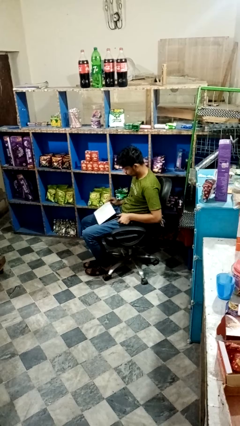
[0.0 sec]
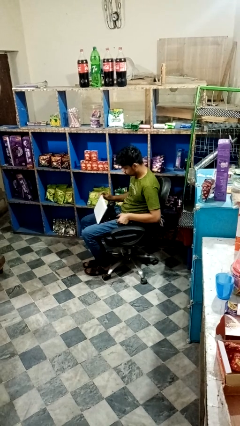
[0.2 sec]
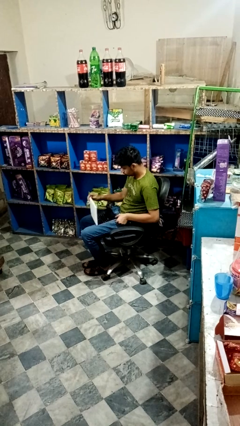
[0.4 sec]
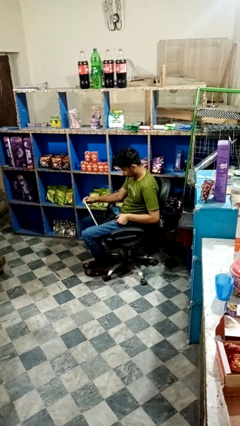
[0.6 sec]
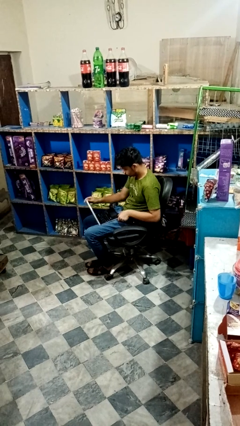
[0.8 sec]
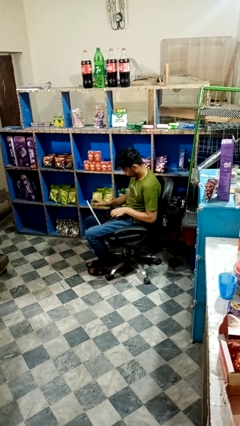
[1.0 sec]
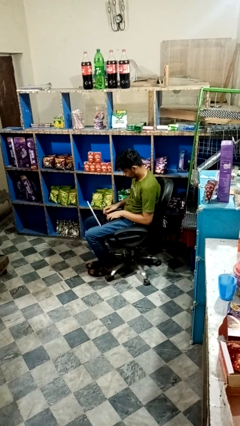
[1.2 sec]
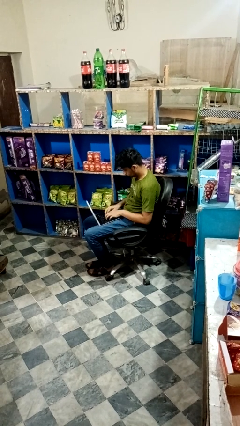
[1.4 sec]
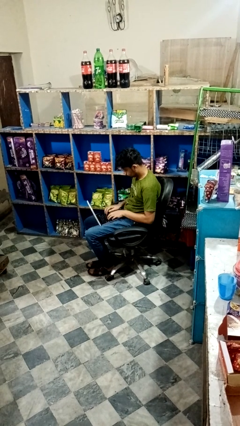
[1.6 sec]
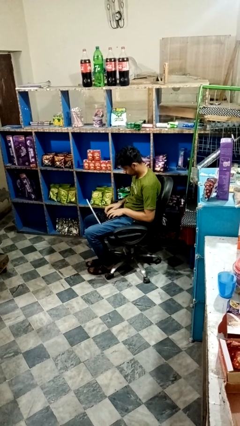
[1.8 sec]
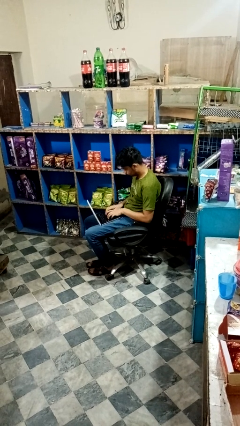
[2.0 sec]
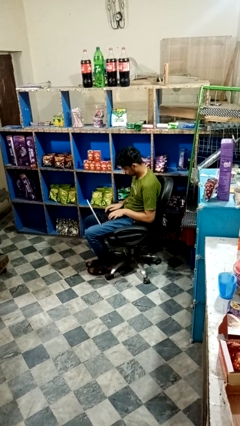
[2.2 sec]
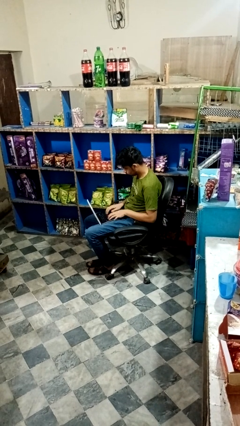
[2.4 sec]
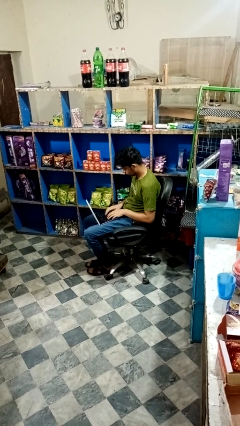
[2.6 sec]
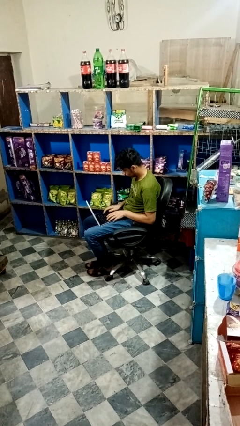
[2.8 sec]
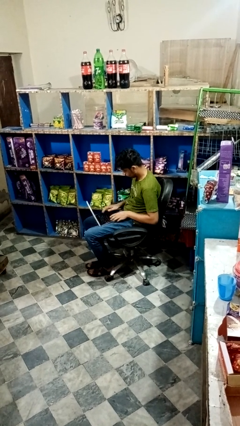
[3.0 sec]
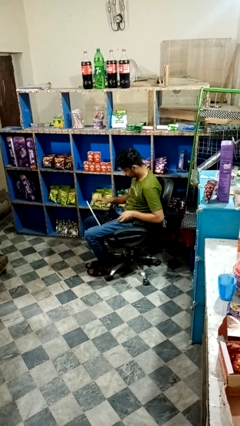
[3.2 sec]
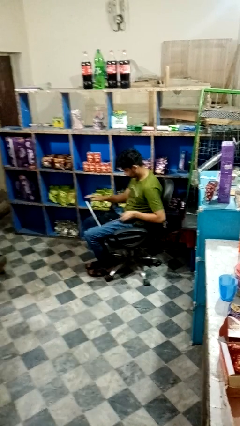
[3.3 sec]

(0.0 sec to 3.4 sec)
person opens laptop

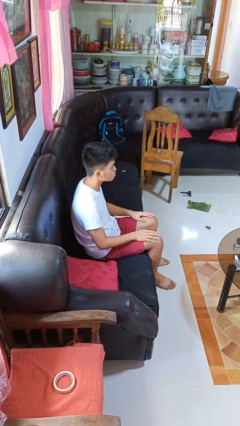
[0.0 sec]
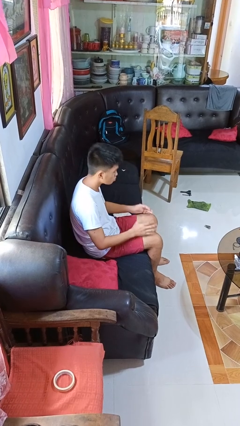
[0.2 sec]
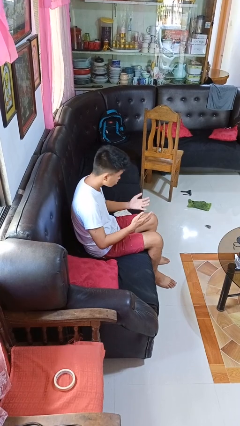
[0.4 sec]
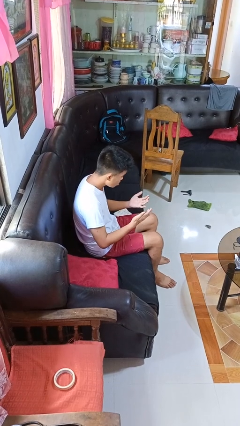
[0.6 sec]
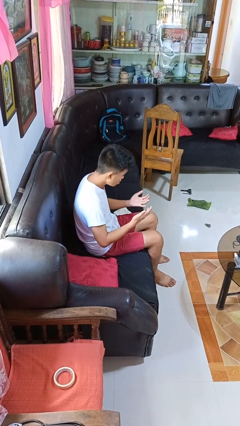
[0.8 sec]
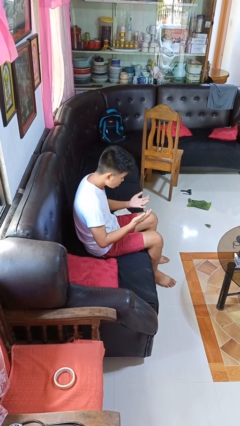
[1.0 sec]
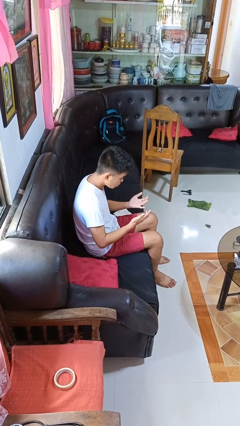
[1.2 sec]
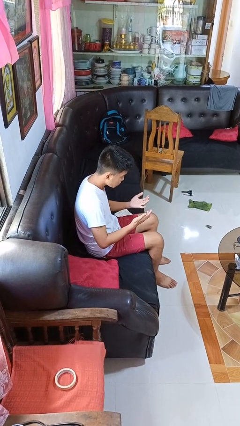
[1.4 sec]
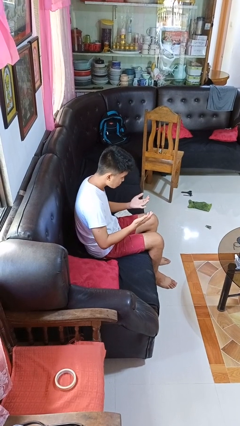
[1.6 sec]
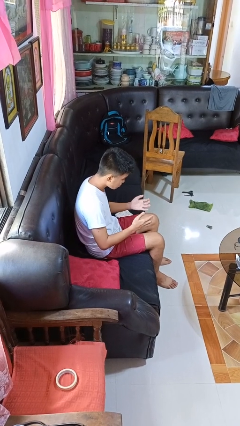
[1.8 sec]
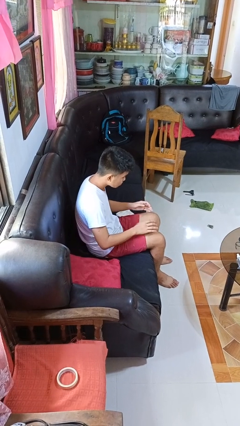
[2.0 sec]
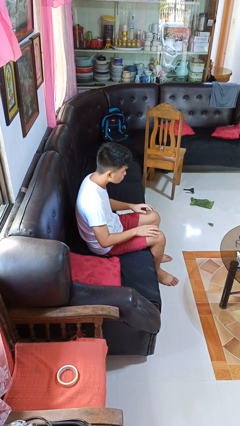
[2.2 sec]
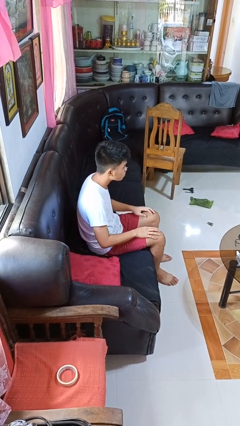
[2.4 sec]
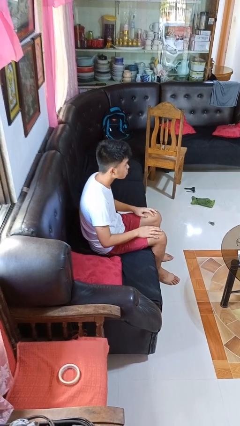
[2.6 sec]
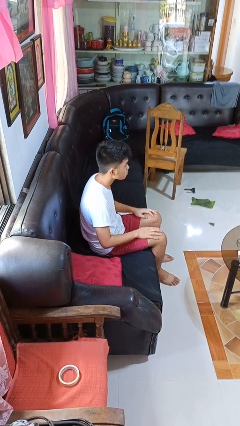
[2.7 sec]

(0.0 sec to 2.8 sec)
person looks at hands in lap

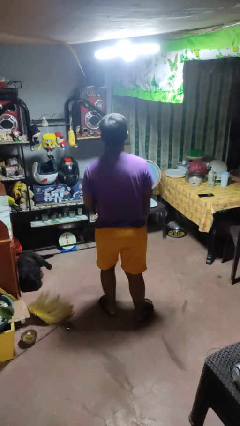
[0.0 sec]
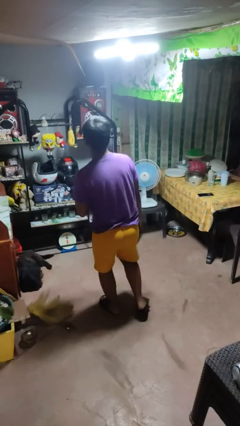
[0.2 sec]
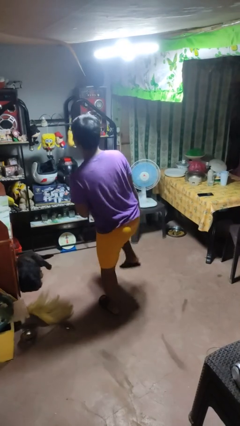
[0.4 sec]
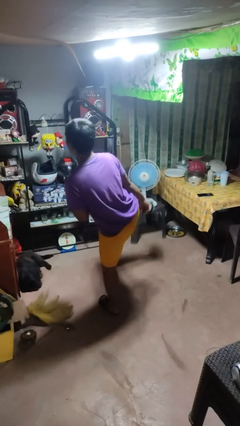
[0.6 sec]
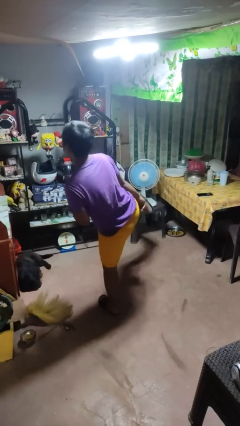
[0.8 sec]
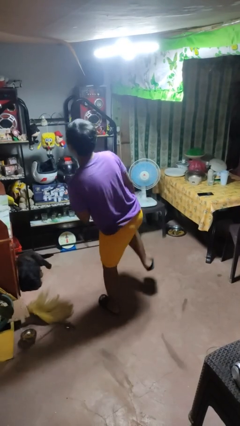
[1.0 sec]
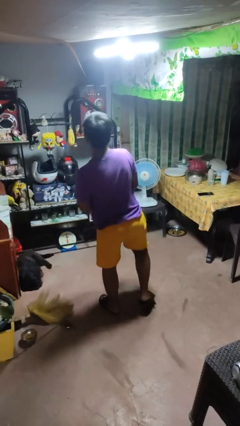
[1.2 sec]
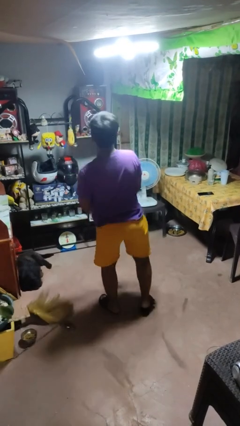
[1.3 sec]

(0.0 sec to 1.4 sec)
person karate kicks

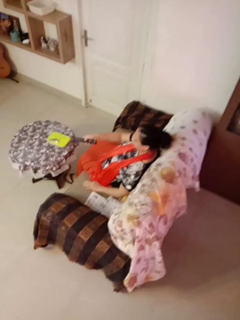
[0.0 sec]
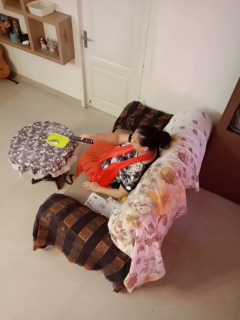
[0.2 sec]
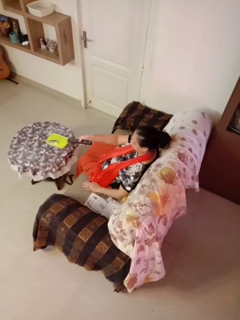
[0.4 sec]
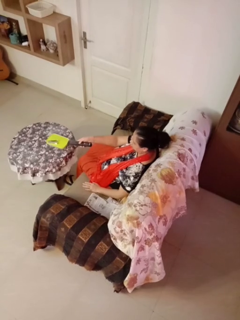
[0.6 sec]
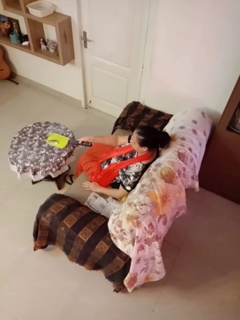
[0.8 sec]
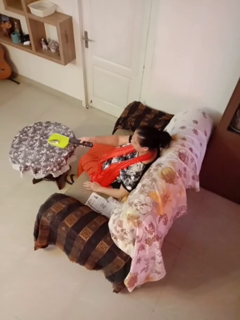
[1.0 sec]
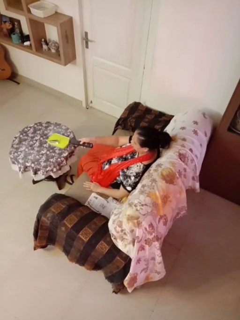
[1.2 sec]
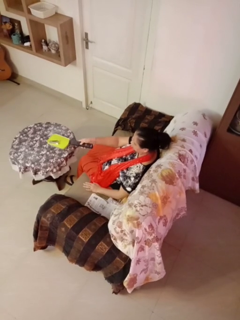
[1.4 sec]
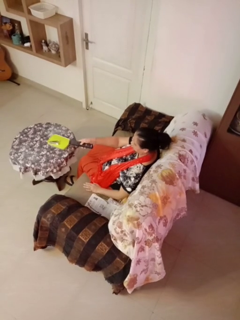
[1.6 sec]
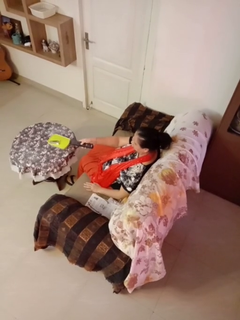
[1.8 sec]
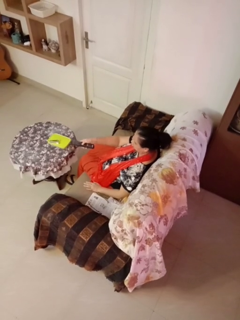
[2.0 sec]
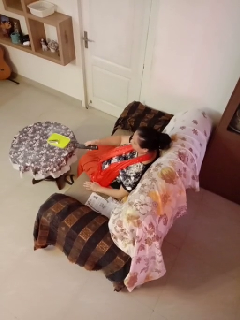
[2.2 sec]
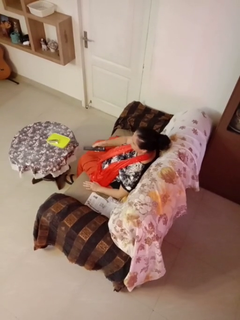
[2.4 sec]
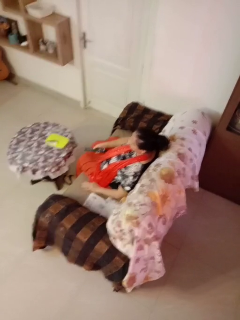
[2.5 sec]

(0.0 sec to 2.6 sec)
person uses television remote

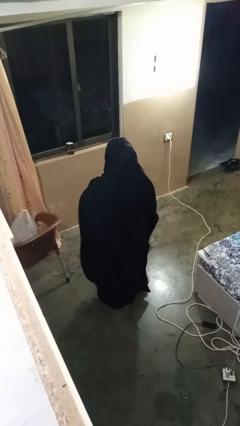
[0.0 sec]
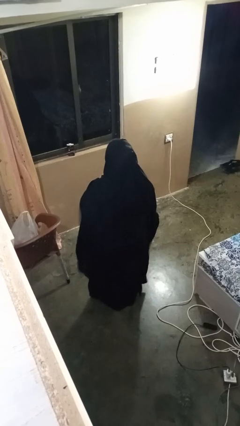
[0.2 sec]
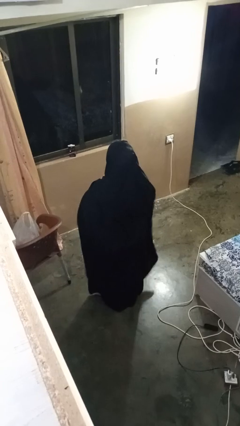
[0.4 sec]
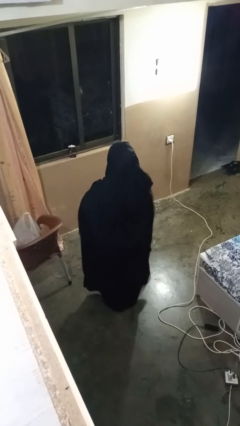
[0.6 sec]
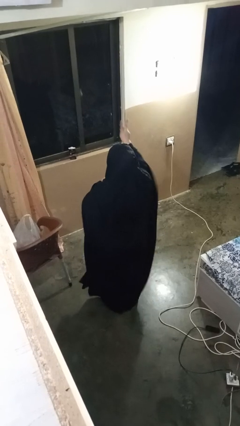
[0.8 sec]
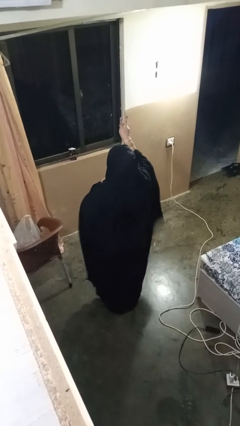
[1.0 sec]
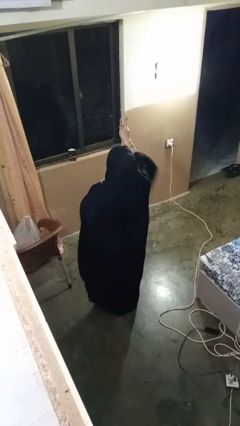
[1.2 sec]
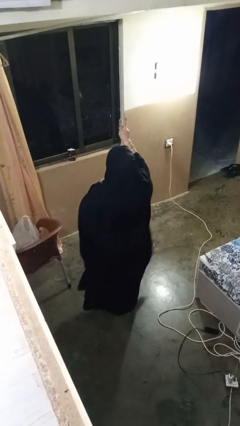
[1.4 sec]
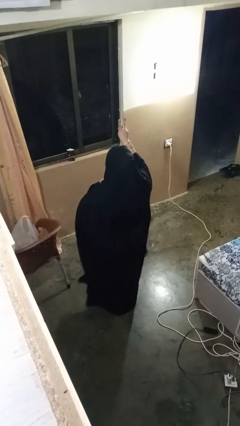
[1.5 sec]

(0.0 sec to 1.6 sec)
person gestures peace

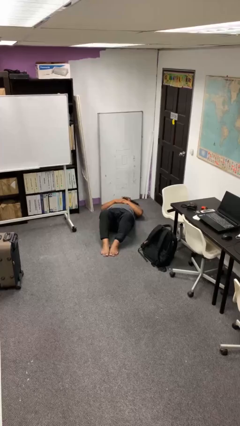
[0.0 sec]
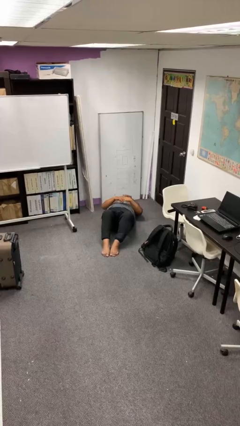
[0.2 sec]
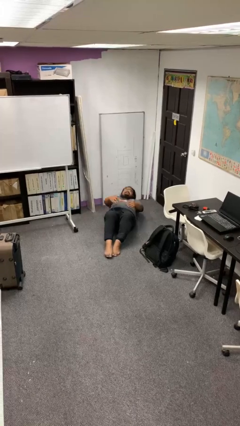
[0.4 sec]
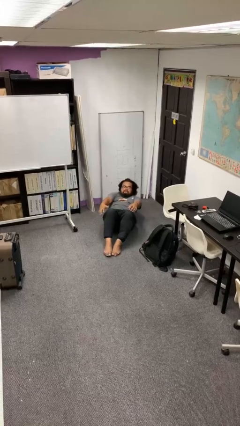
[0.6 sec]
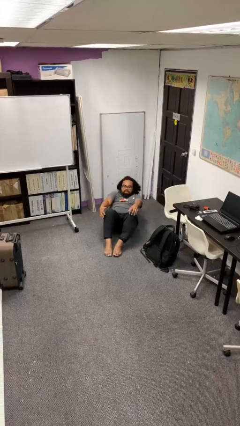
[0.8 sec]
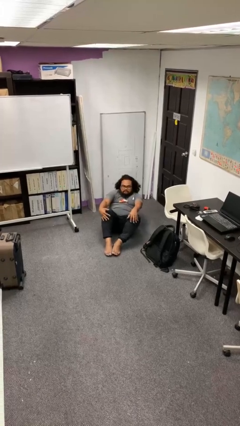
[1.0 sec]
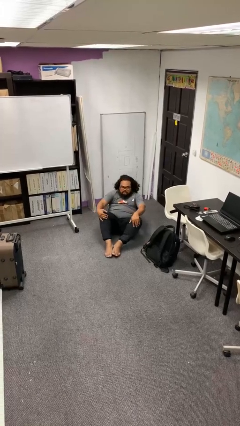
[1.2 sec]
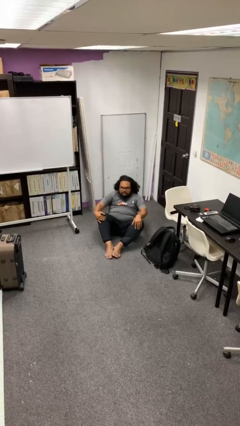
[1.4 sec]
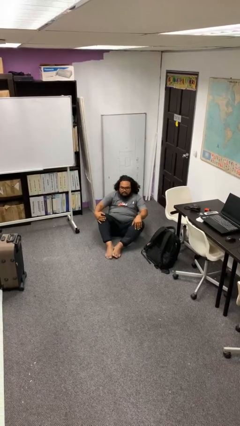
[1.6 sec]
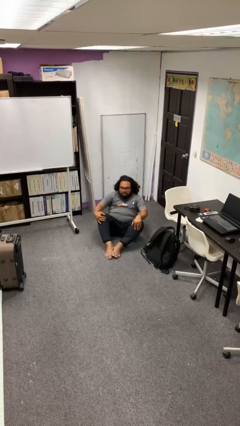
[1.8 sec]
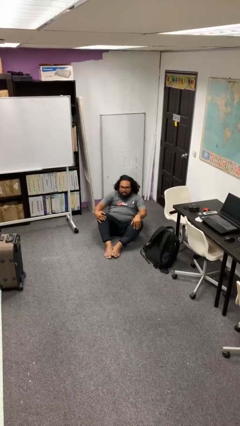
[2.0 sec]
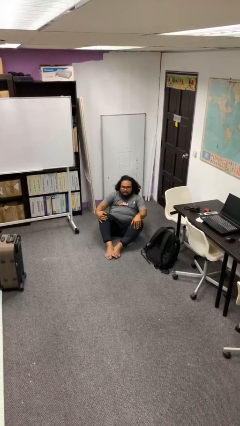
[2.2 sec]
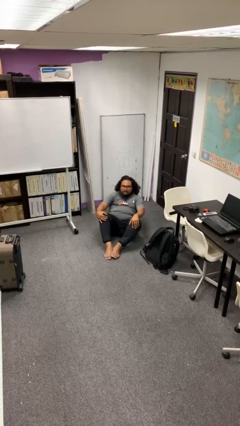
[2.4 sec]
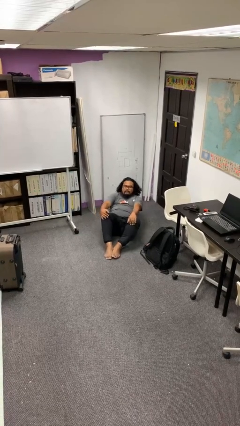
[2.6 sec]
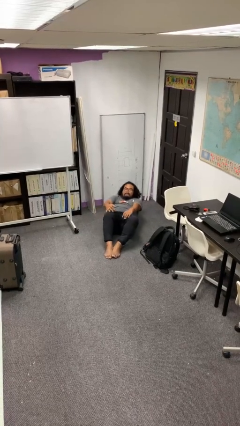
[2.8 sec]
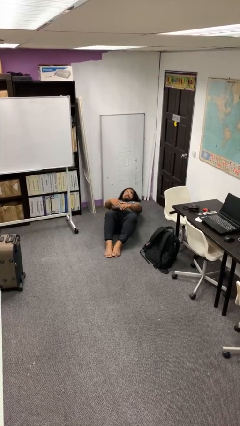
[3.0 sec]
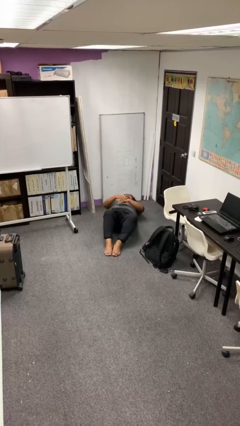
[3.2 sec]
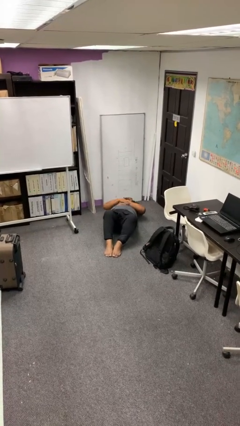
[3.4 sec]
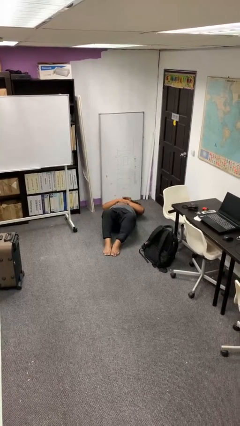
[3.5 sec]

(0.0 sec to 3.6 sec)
person exercises with situp

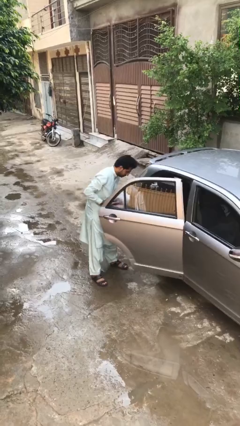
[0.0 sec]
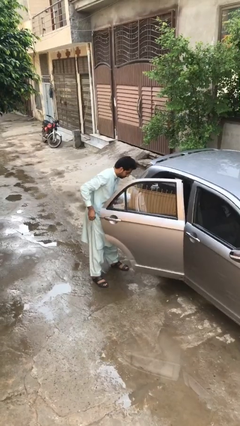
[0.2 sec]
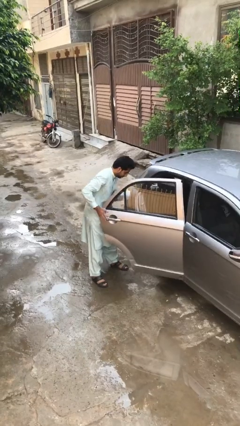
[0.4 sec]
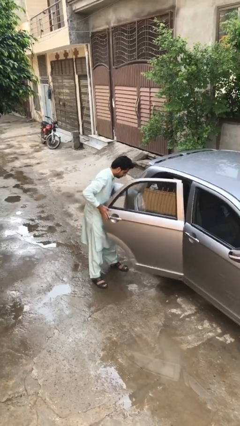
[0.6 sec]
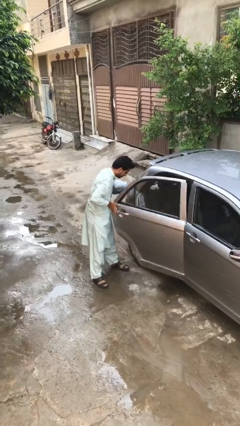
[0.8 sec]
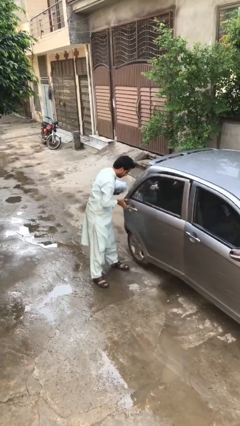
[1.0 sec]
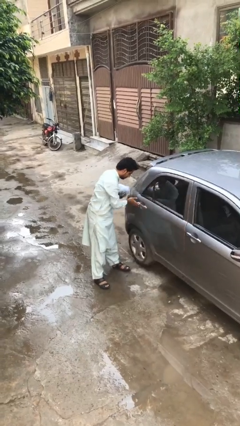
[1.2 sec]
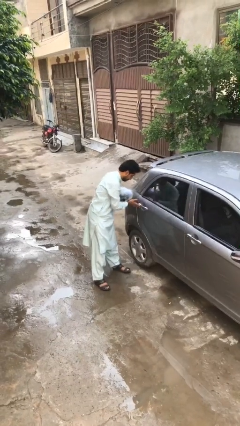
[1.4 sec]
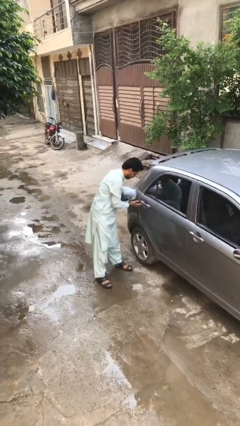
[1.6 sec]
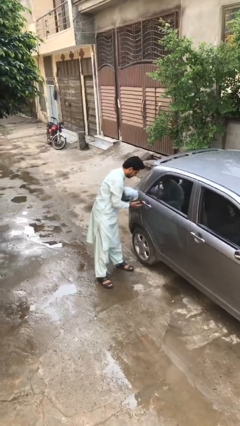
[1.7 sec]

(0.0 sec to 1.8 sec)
person closes car door
